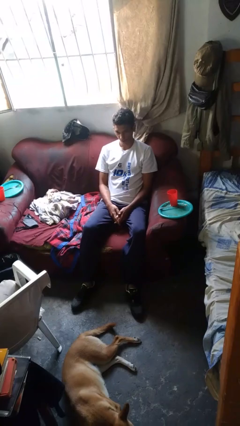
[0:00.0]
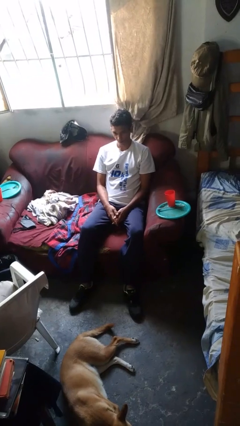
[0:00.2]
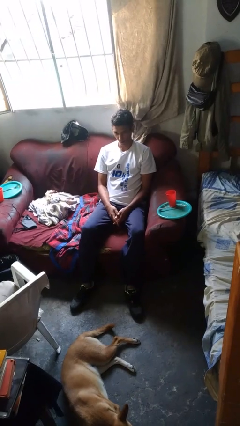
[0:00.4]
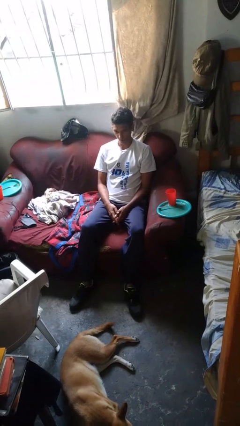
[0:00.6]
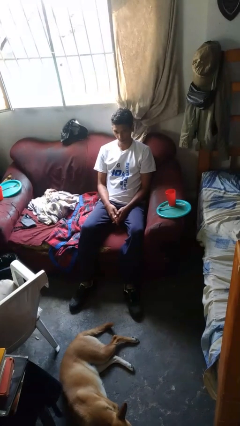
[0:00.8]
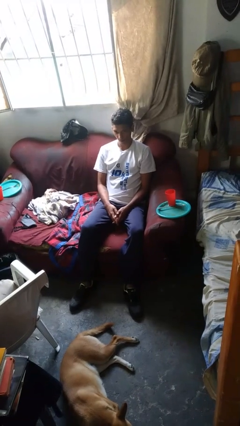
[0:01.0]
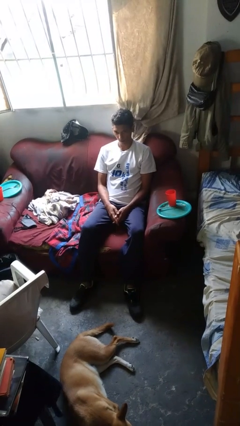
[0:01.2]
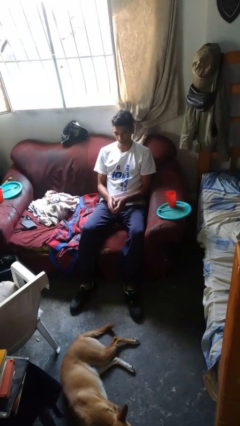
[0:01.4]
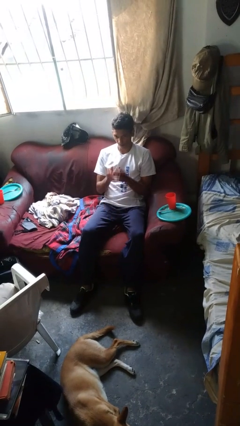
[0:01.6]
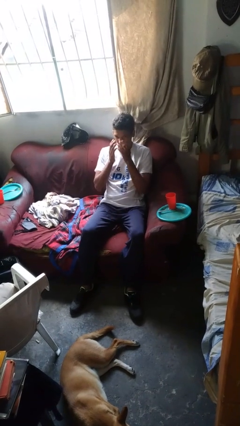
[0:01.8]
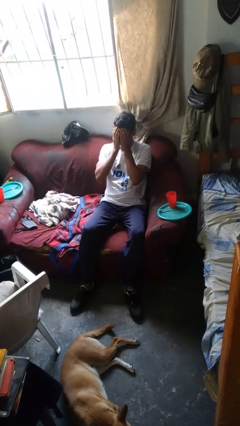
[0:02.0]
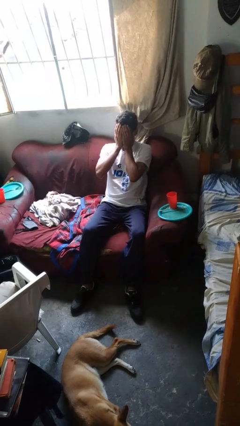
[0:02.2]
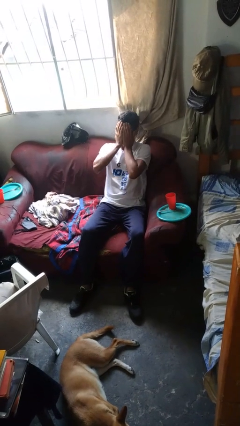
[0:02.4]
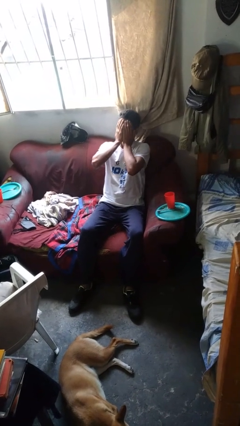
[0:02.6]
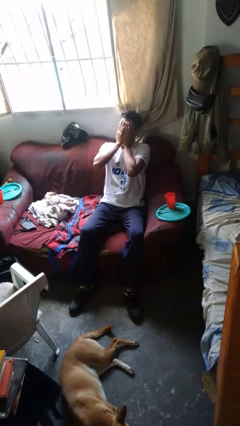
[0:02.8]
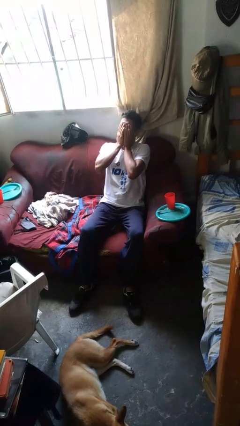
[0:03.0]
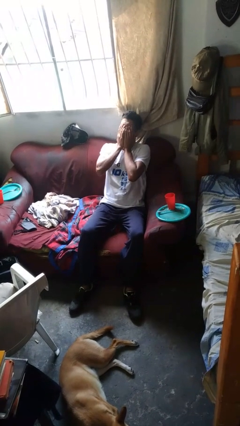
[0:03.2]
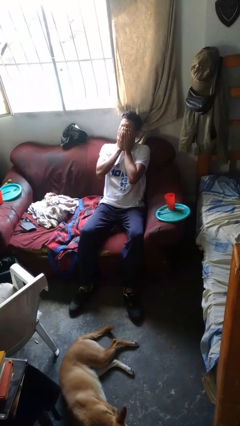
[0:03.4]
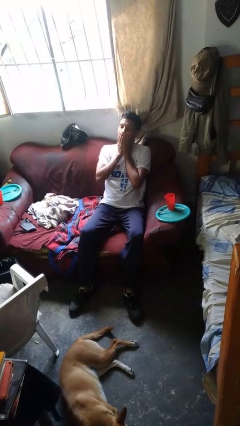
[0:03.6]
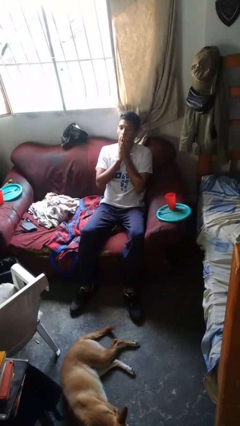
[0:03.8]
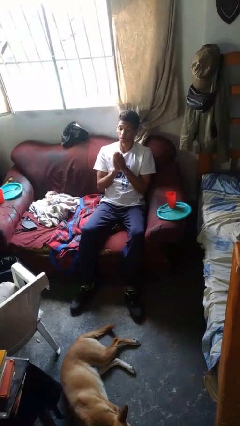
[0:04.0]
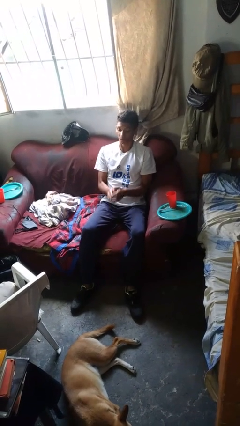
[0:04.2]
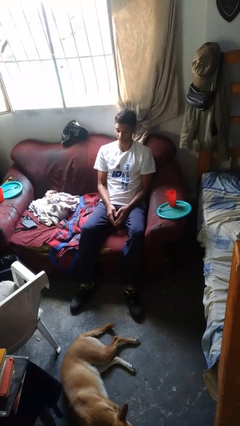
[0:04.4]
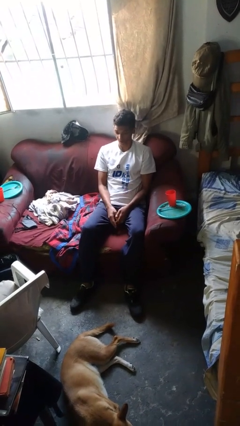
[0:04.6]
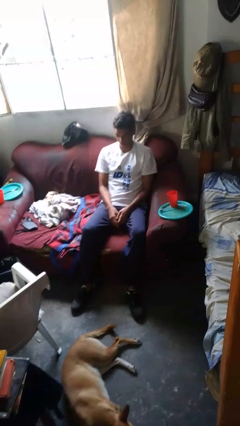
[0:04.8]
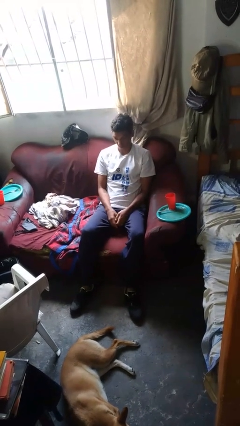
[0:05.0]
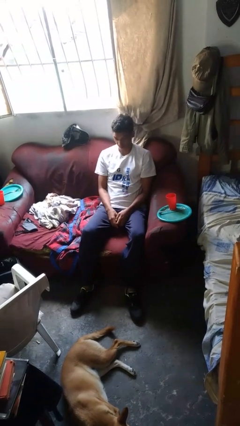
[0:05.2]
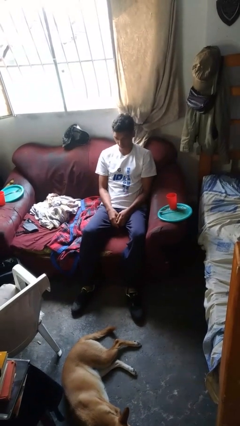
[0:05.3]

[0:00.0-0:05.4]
person covers face with hands

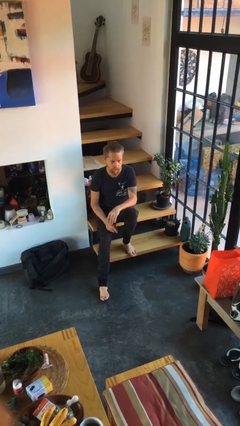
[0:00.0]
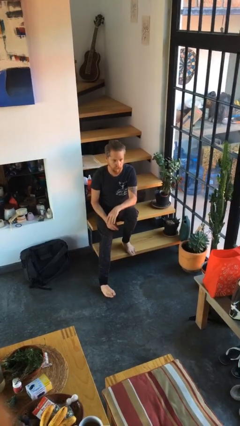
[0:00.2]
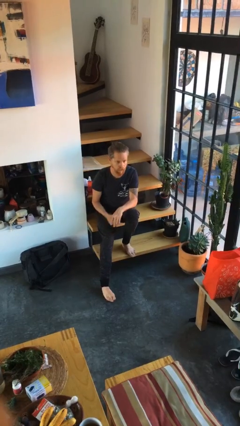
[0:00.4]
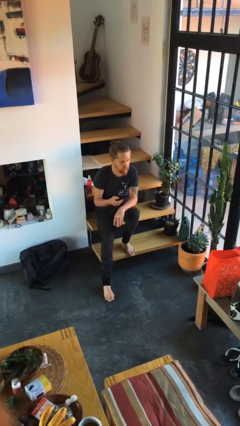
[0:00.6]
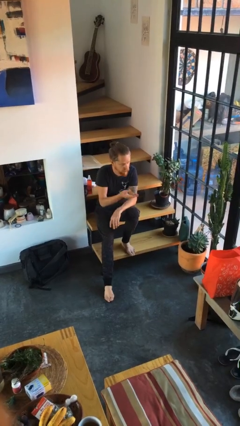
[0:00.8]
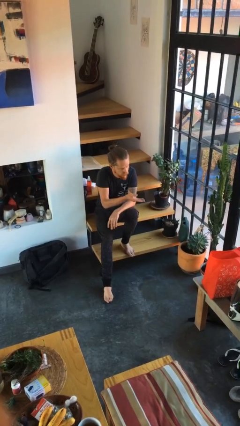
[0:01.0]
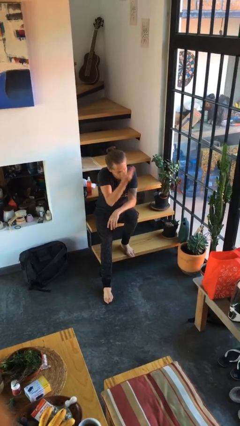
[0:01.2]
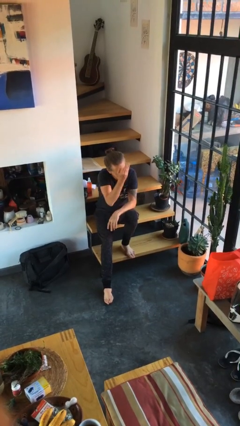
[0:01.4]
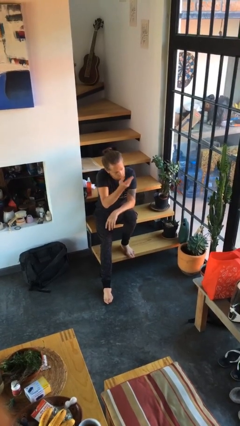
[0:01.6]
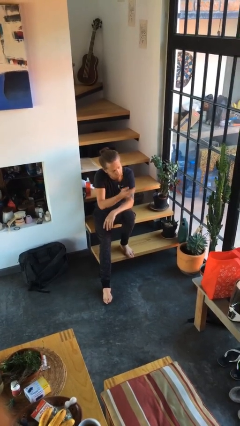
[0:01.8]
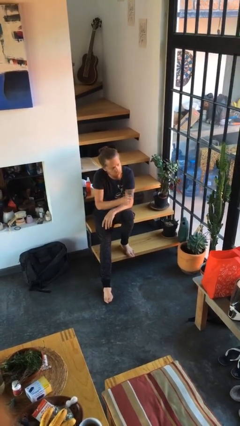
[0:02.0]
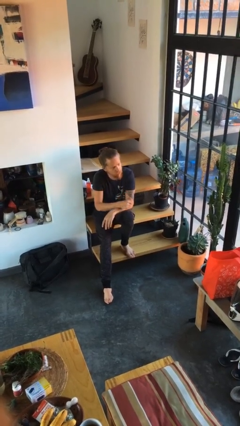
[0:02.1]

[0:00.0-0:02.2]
person gestures swipe up

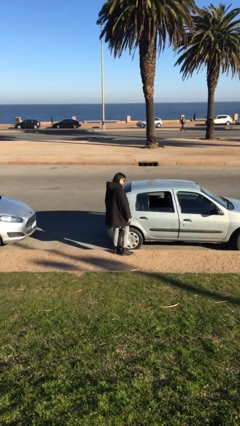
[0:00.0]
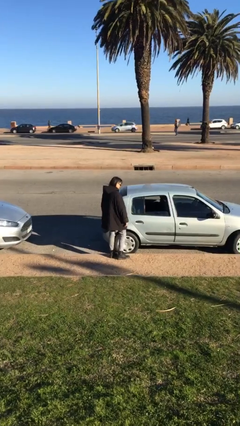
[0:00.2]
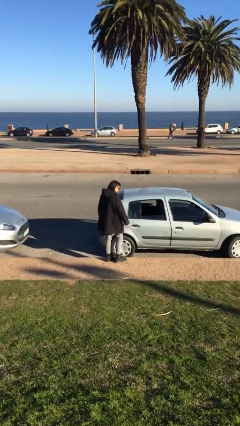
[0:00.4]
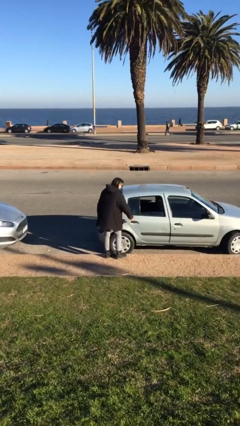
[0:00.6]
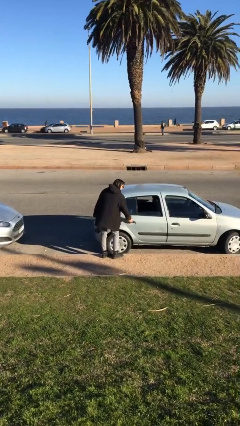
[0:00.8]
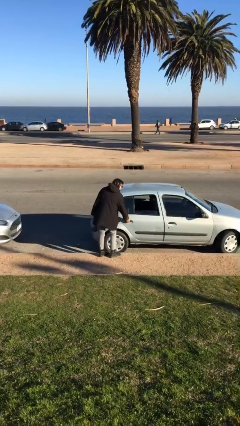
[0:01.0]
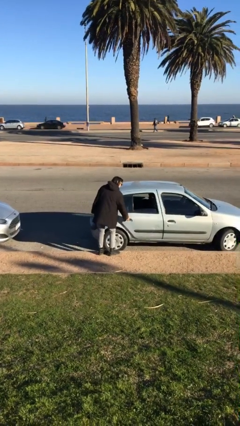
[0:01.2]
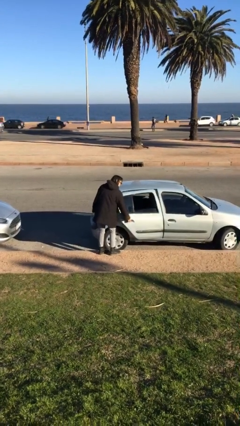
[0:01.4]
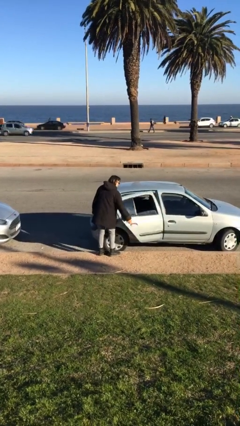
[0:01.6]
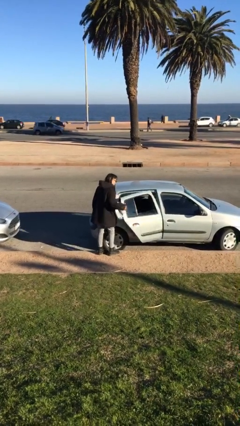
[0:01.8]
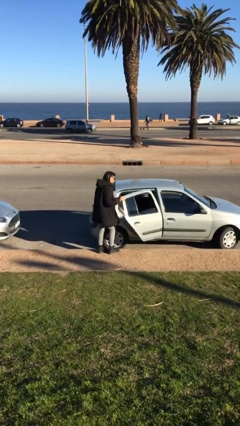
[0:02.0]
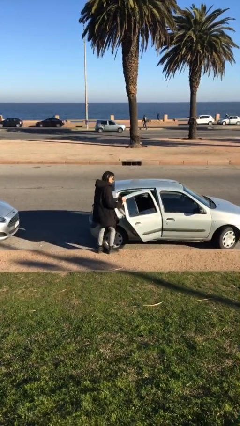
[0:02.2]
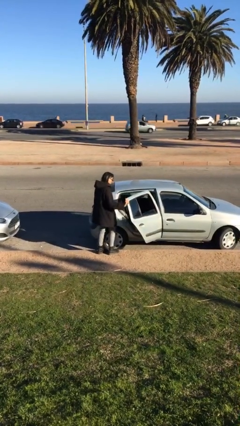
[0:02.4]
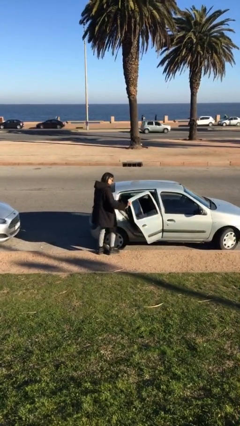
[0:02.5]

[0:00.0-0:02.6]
person opens car door

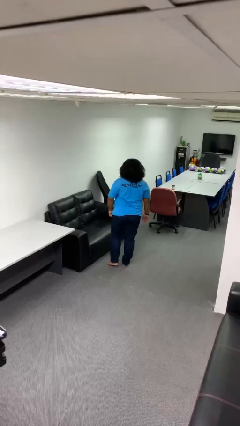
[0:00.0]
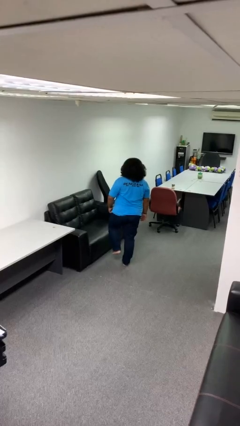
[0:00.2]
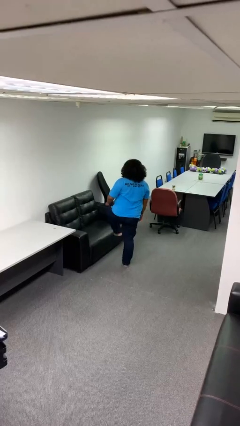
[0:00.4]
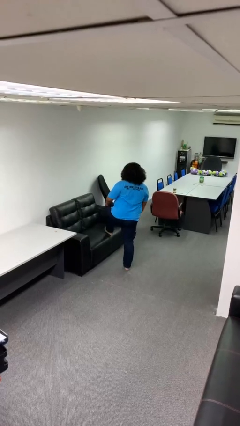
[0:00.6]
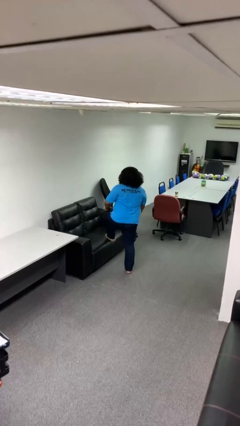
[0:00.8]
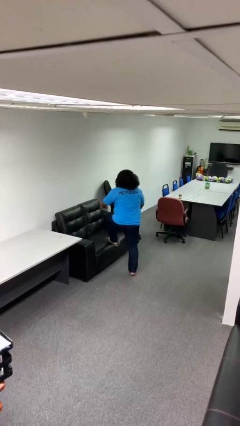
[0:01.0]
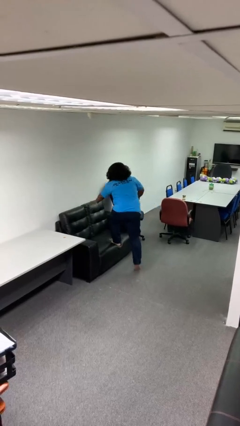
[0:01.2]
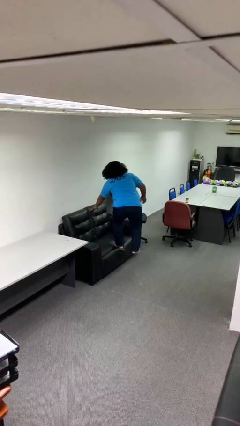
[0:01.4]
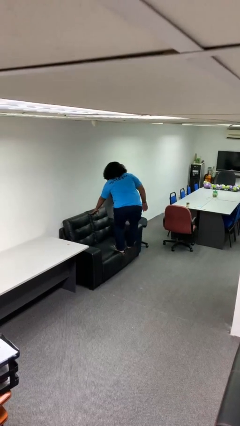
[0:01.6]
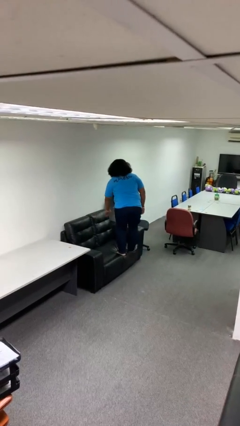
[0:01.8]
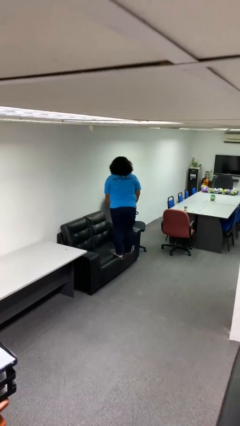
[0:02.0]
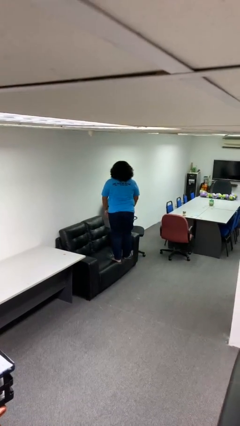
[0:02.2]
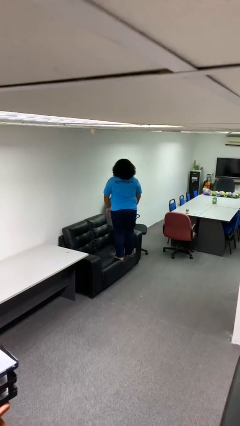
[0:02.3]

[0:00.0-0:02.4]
person climbs on couch

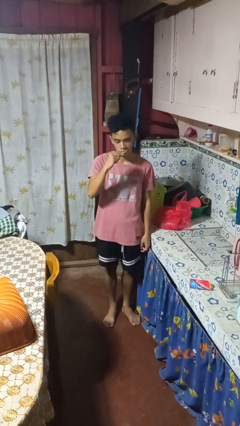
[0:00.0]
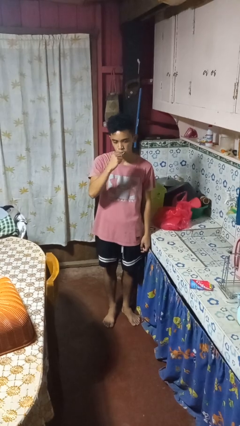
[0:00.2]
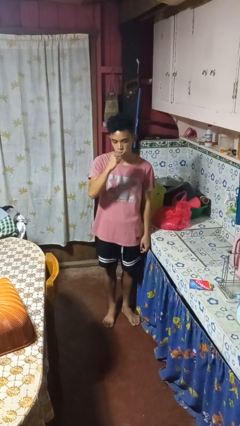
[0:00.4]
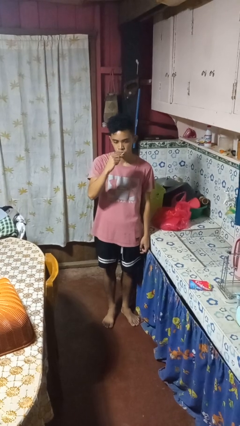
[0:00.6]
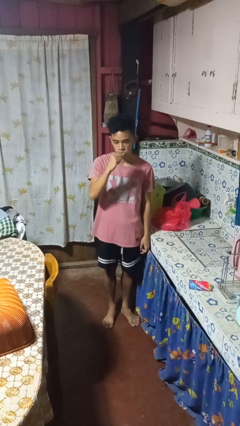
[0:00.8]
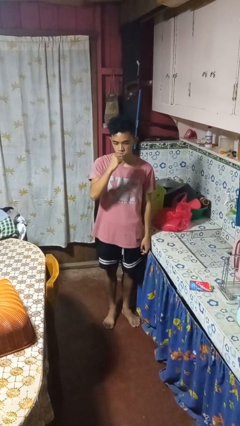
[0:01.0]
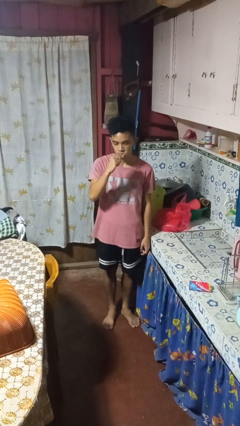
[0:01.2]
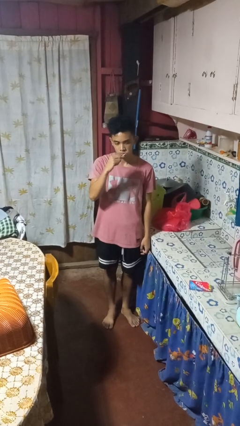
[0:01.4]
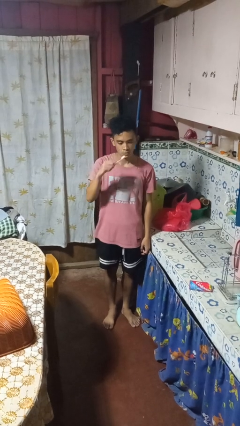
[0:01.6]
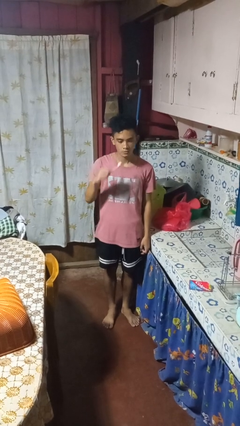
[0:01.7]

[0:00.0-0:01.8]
person brushes teeth

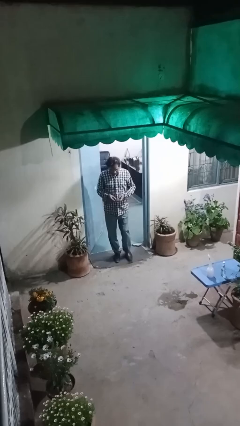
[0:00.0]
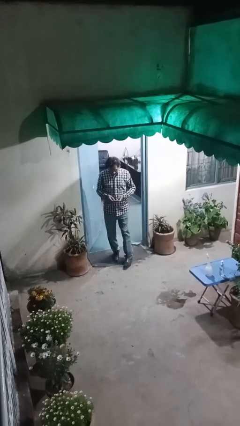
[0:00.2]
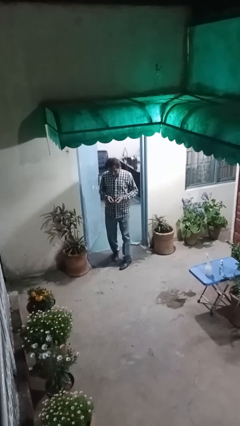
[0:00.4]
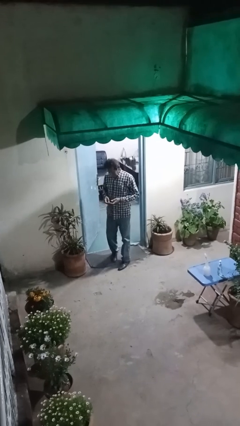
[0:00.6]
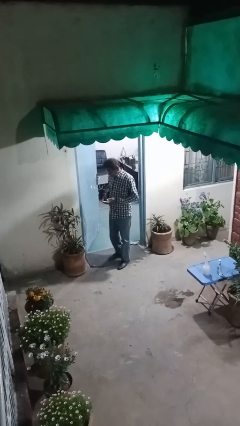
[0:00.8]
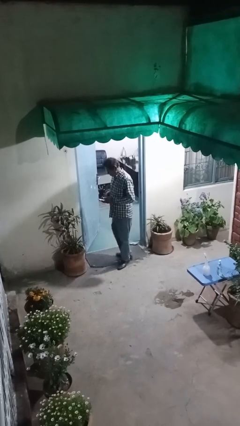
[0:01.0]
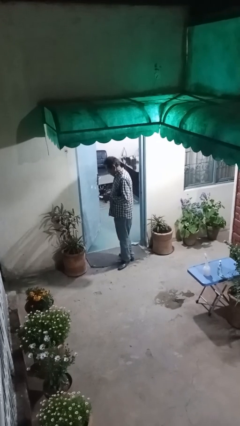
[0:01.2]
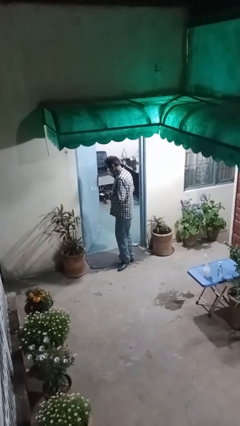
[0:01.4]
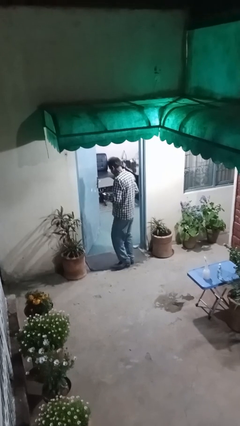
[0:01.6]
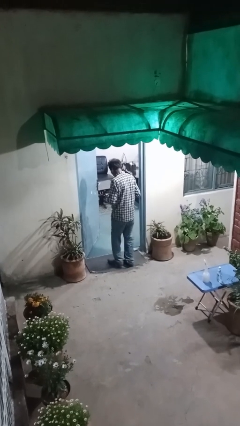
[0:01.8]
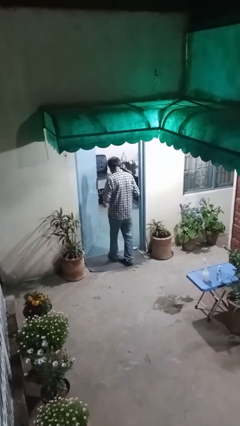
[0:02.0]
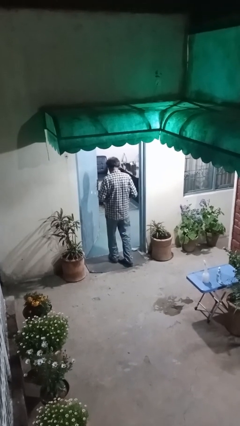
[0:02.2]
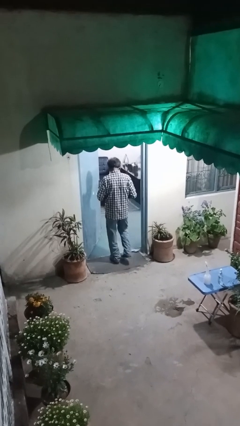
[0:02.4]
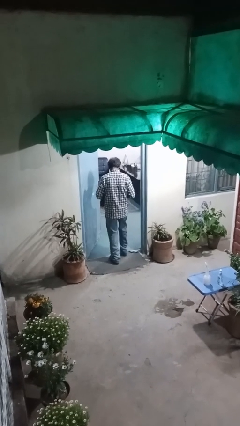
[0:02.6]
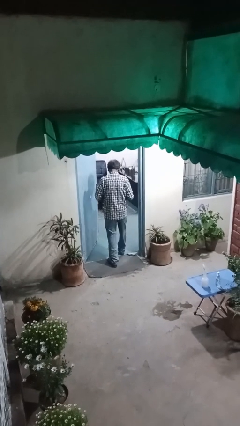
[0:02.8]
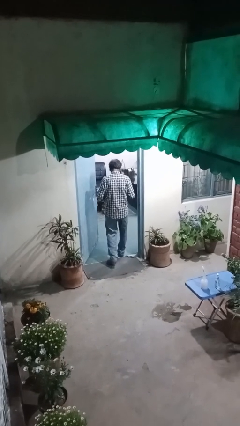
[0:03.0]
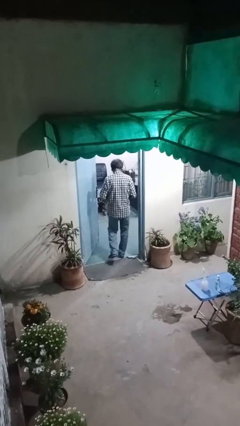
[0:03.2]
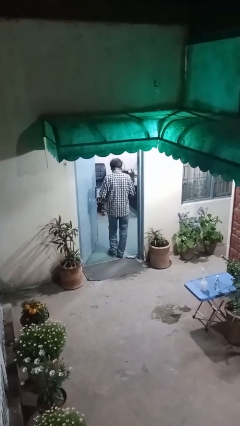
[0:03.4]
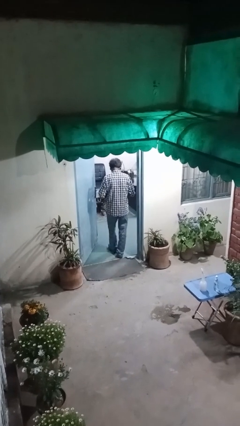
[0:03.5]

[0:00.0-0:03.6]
person exits scene through structure
